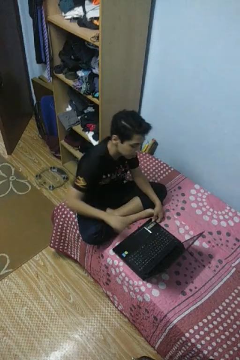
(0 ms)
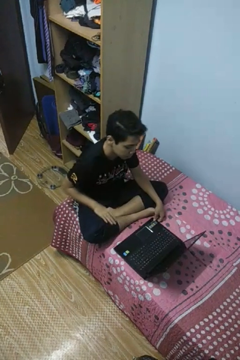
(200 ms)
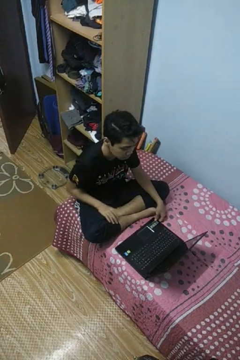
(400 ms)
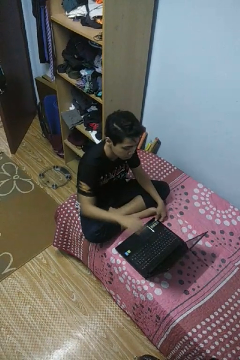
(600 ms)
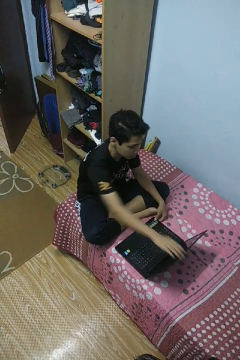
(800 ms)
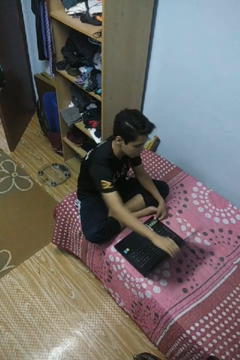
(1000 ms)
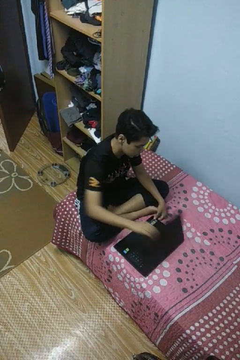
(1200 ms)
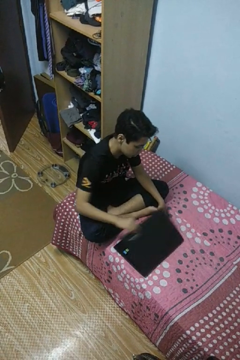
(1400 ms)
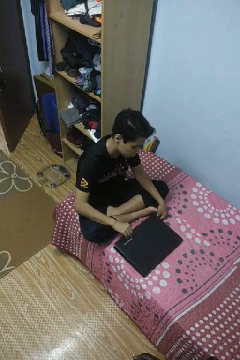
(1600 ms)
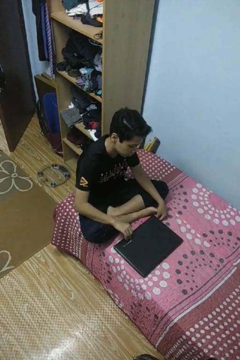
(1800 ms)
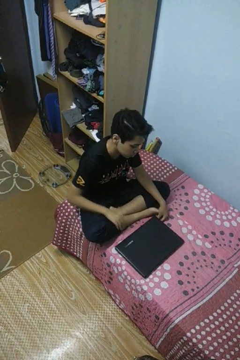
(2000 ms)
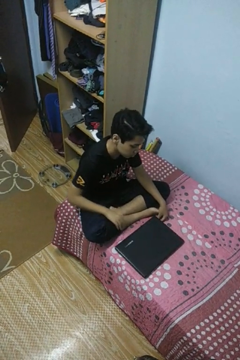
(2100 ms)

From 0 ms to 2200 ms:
person closes laptop

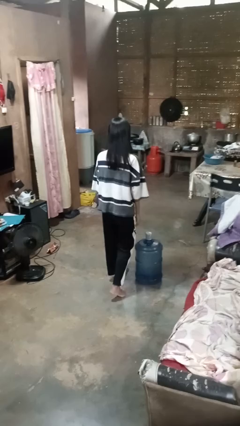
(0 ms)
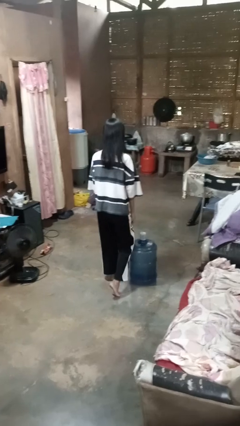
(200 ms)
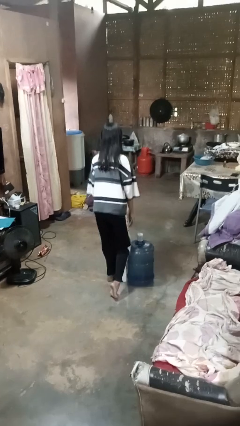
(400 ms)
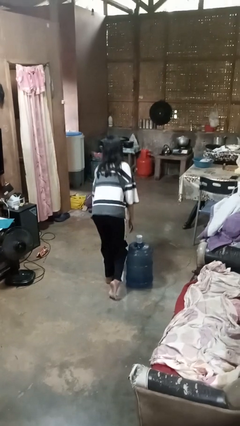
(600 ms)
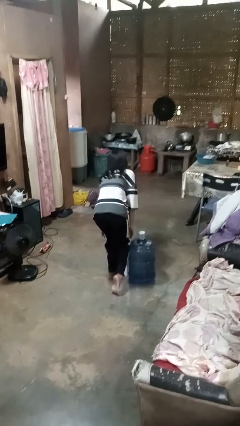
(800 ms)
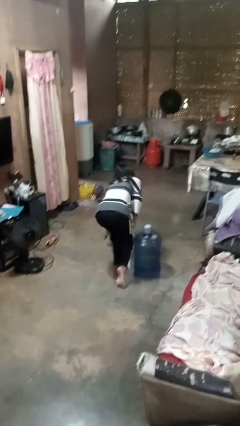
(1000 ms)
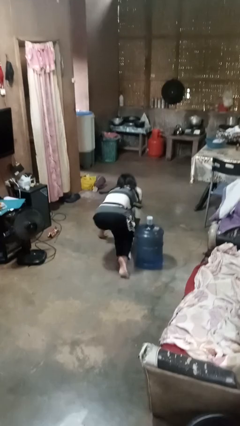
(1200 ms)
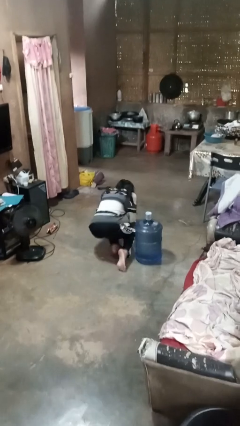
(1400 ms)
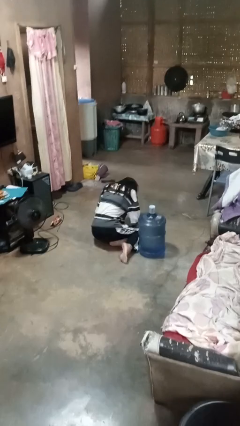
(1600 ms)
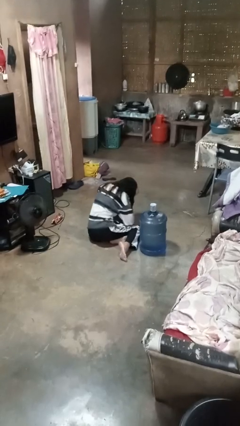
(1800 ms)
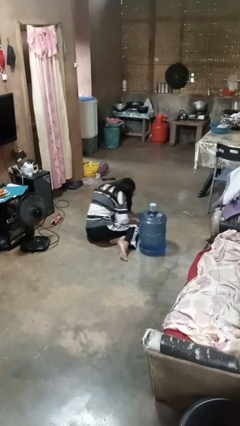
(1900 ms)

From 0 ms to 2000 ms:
person trips on object on floor

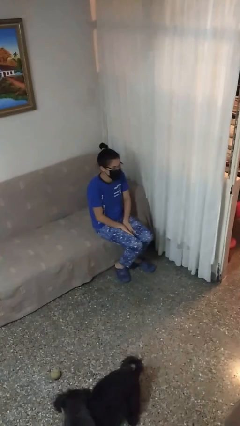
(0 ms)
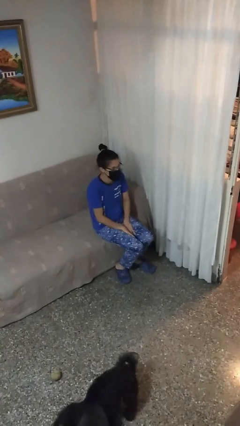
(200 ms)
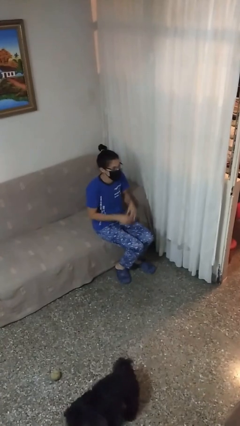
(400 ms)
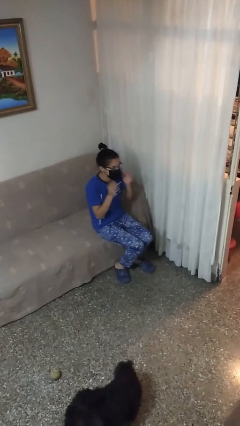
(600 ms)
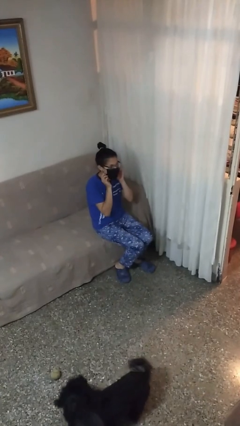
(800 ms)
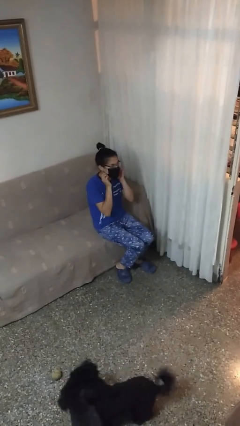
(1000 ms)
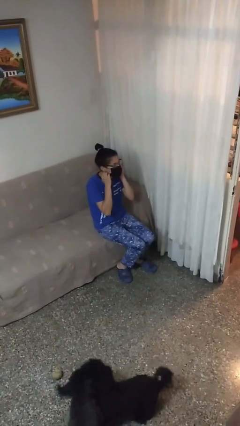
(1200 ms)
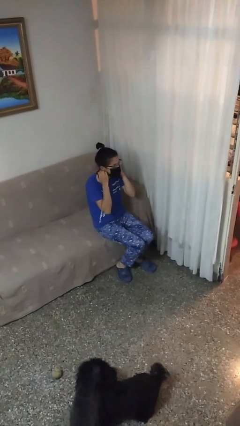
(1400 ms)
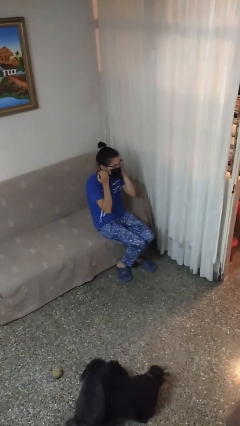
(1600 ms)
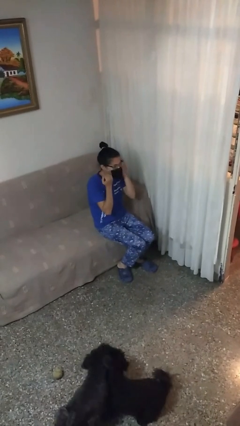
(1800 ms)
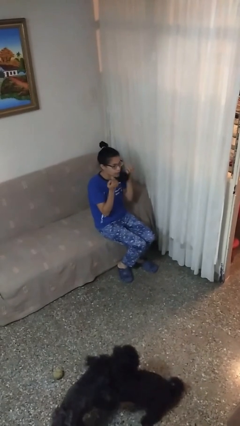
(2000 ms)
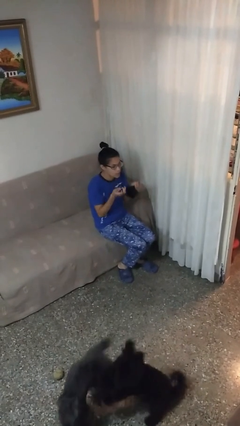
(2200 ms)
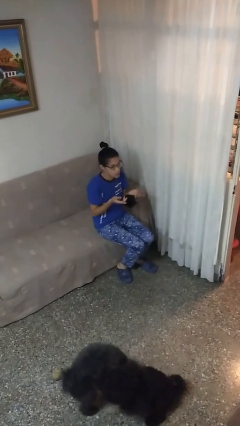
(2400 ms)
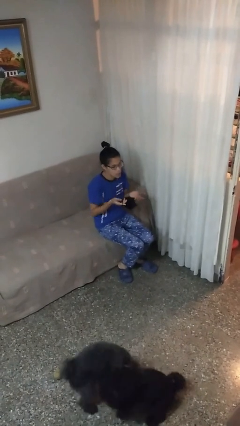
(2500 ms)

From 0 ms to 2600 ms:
person takes off facemask

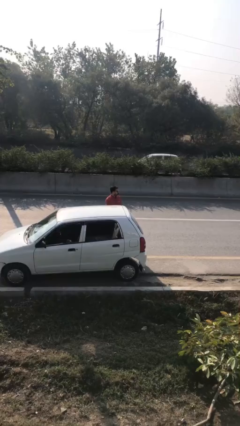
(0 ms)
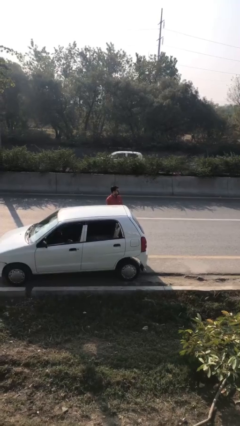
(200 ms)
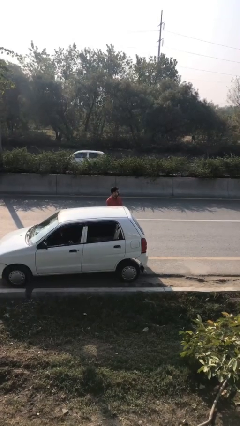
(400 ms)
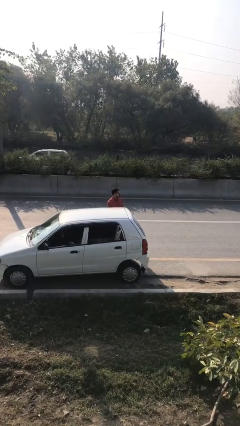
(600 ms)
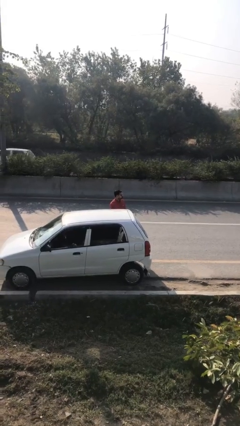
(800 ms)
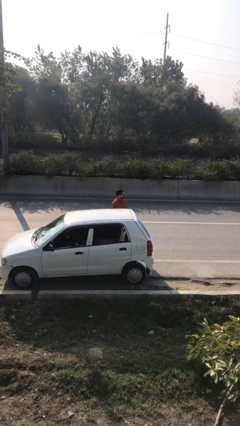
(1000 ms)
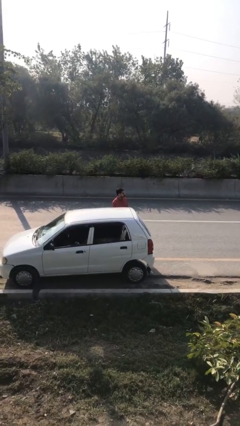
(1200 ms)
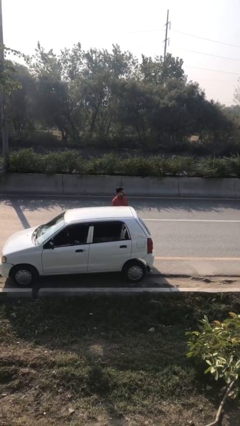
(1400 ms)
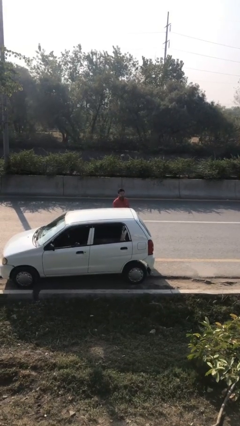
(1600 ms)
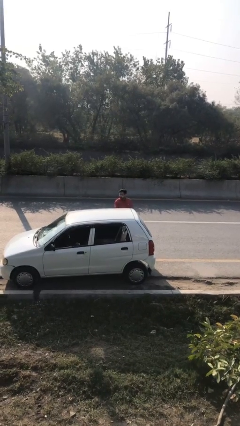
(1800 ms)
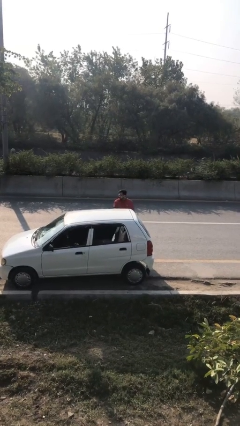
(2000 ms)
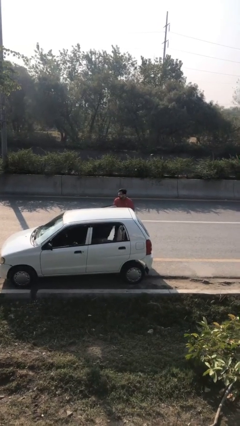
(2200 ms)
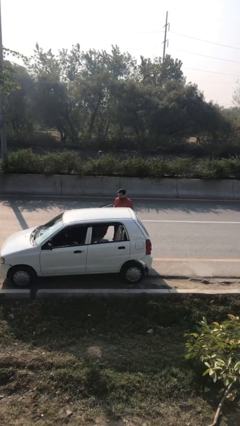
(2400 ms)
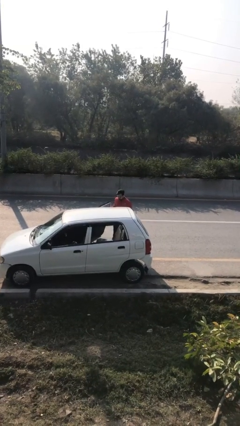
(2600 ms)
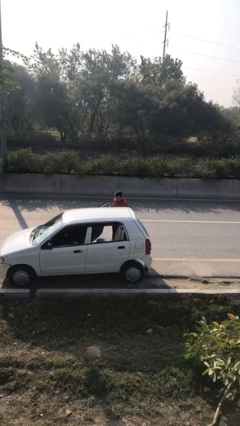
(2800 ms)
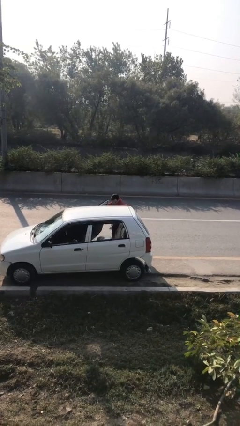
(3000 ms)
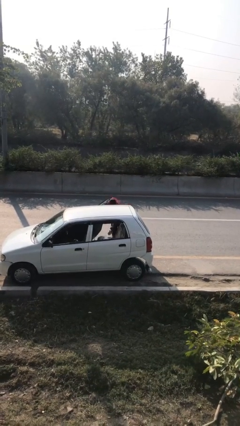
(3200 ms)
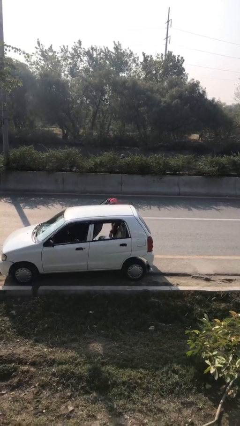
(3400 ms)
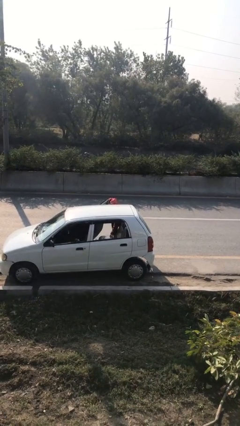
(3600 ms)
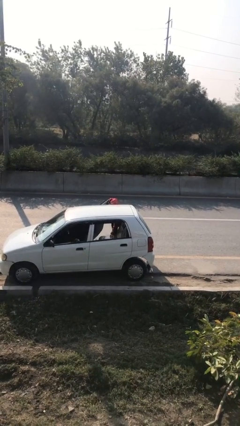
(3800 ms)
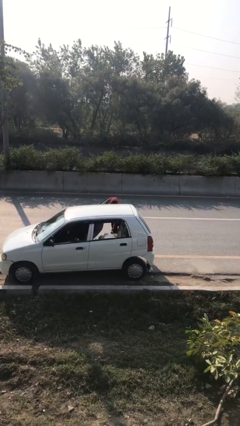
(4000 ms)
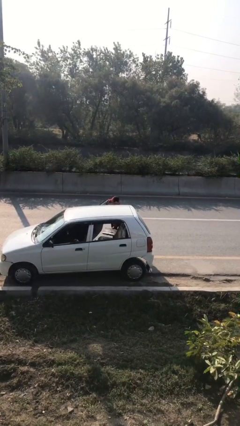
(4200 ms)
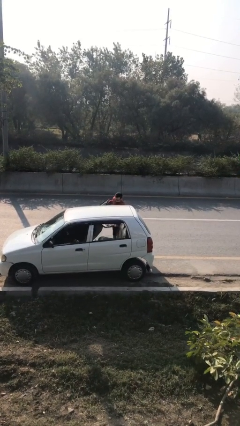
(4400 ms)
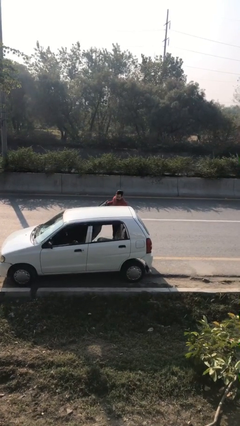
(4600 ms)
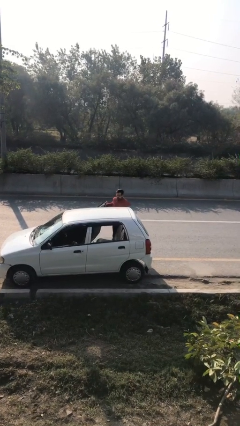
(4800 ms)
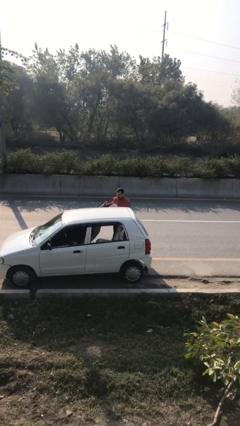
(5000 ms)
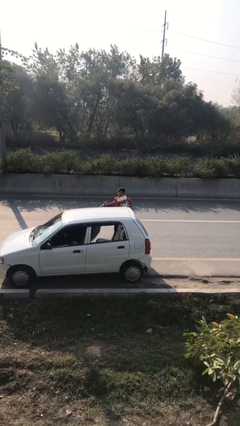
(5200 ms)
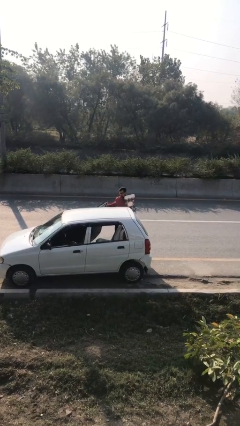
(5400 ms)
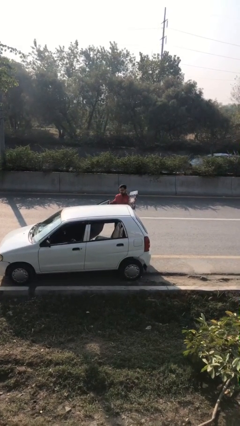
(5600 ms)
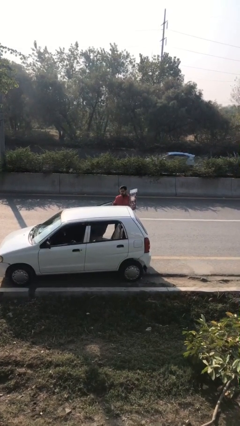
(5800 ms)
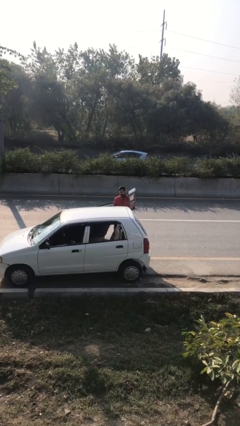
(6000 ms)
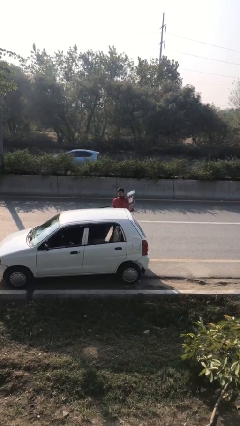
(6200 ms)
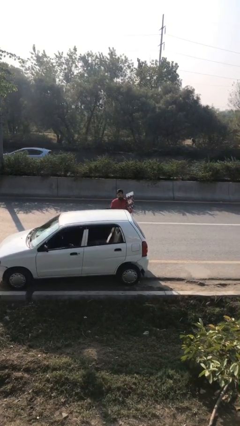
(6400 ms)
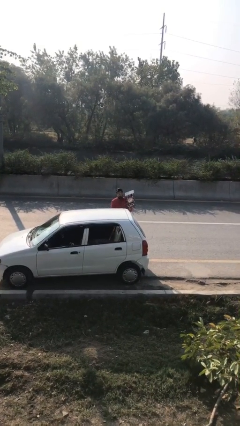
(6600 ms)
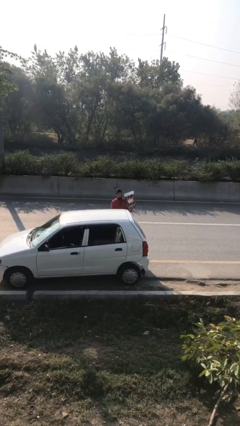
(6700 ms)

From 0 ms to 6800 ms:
person unloads car

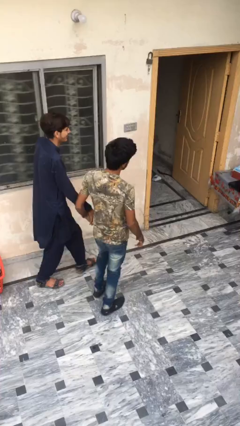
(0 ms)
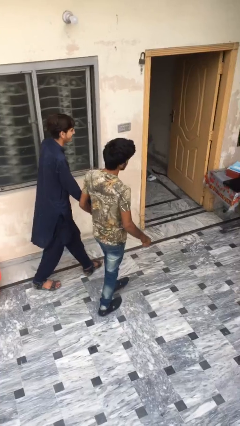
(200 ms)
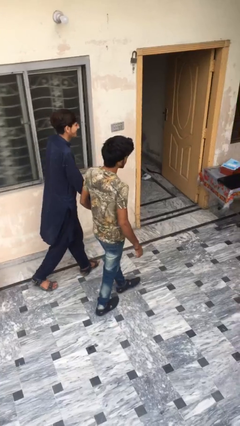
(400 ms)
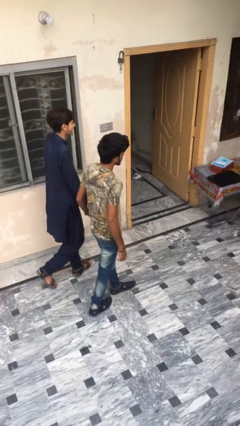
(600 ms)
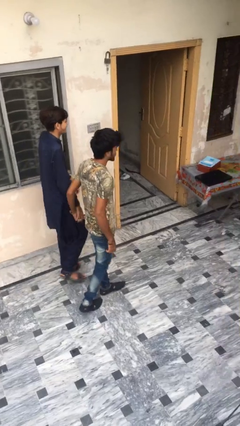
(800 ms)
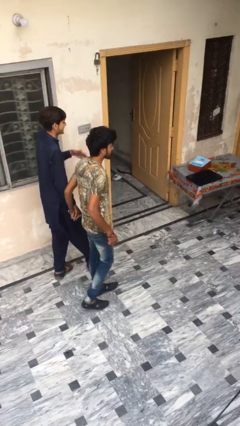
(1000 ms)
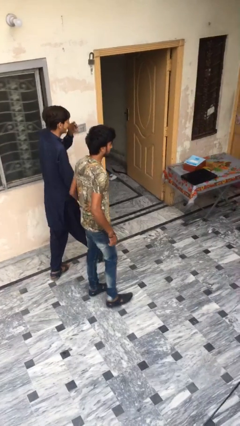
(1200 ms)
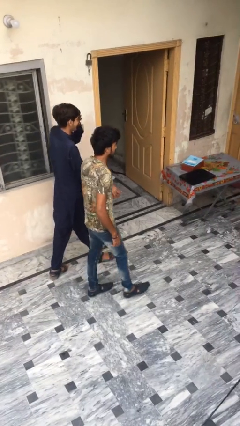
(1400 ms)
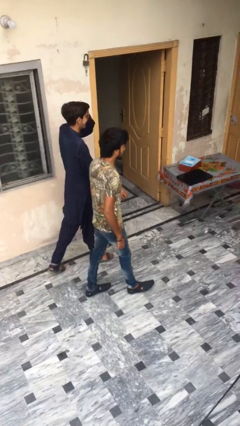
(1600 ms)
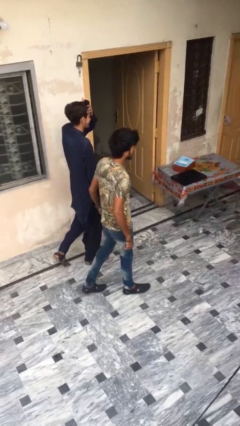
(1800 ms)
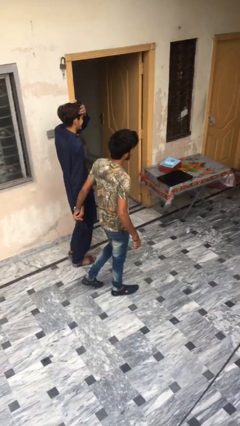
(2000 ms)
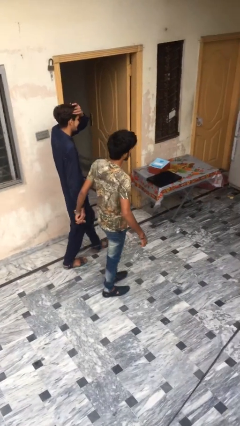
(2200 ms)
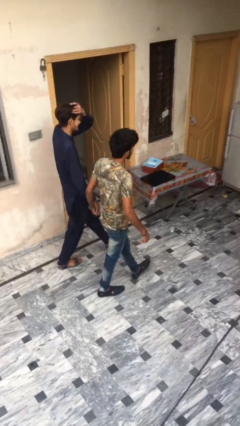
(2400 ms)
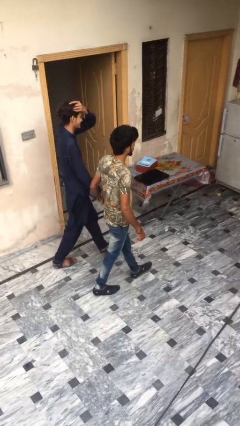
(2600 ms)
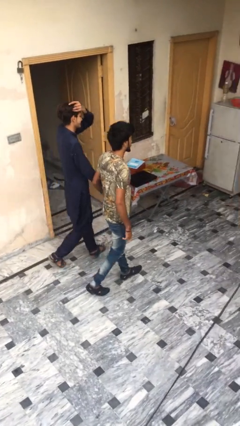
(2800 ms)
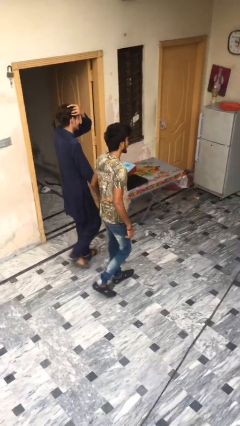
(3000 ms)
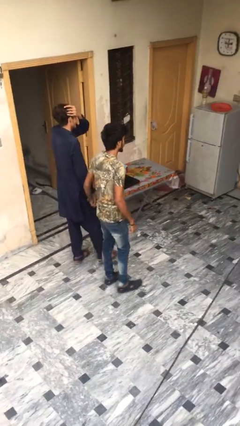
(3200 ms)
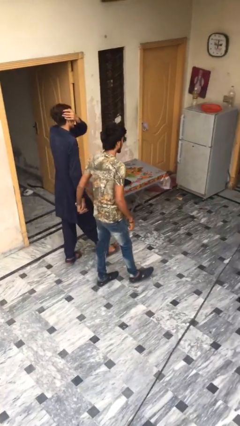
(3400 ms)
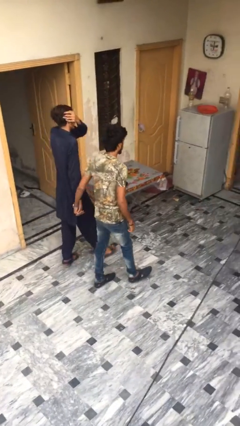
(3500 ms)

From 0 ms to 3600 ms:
person talks to person

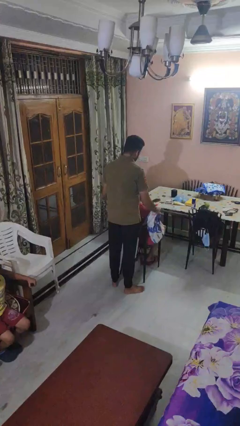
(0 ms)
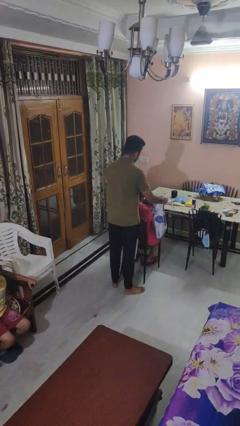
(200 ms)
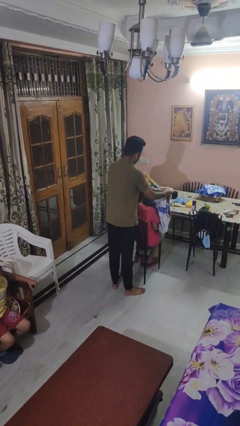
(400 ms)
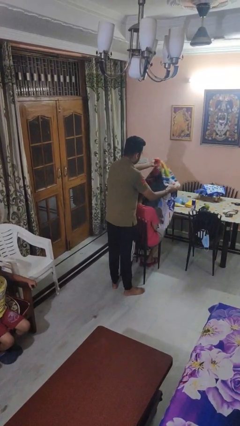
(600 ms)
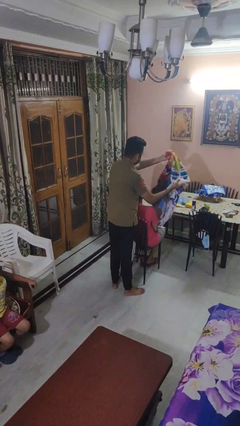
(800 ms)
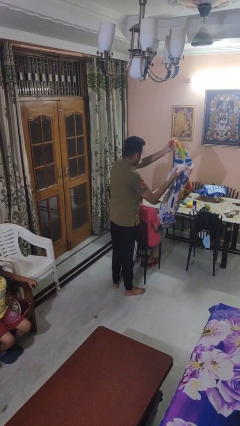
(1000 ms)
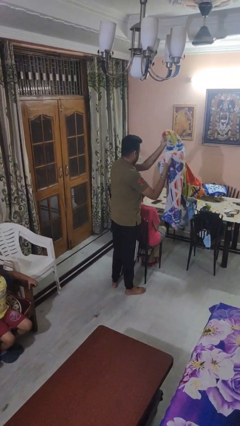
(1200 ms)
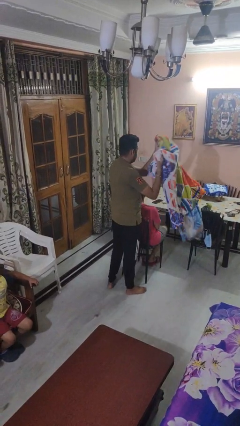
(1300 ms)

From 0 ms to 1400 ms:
person uncovers friend with blanket
